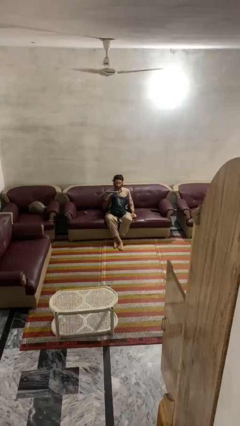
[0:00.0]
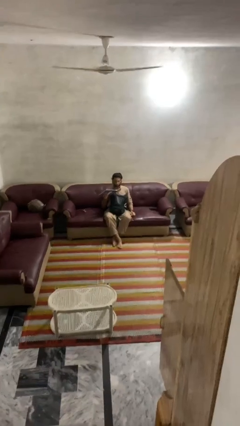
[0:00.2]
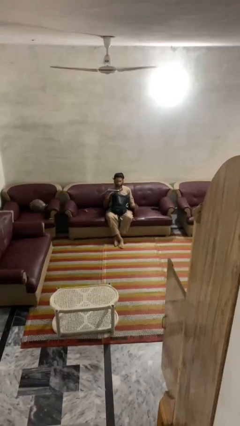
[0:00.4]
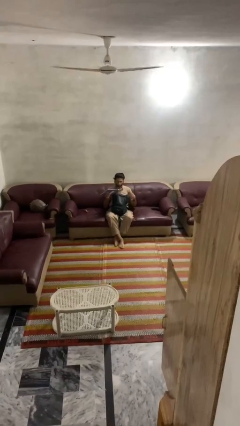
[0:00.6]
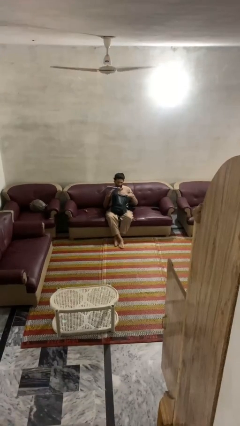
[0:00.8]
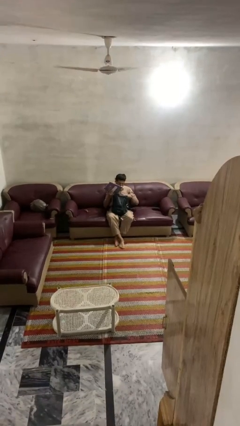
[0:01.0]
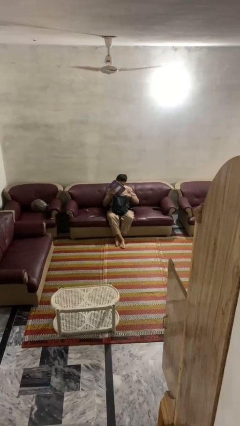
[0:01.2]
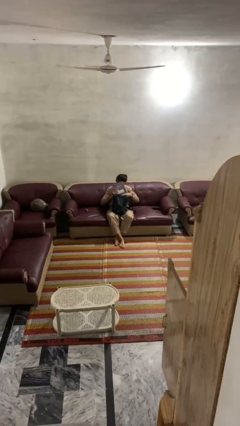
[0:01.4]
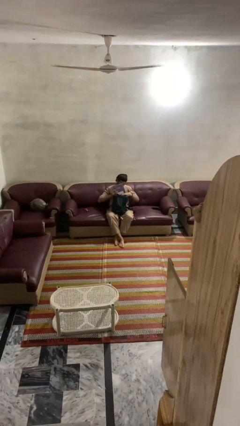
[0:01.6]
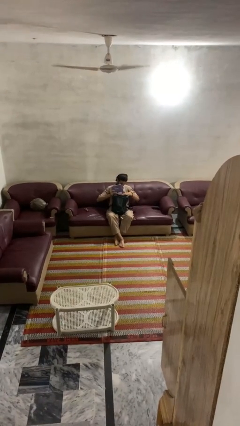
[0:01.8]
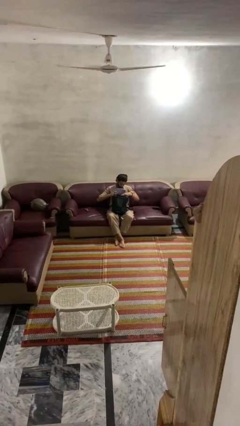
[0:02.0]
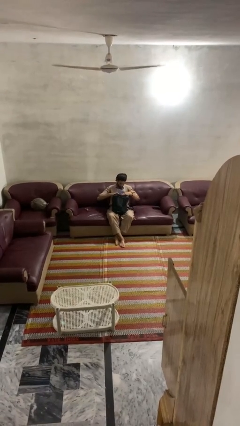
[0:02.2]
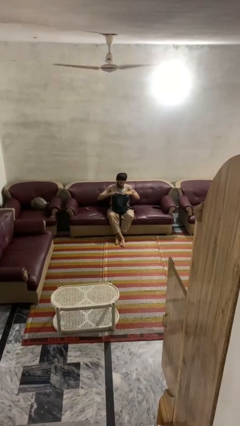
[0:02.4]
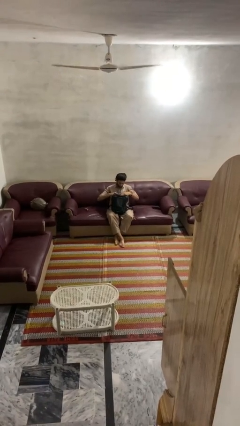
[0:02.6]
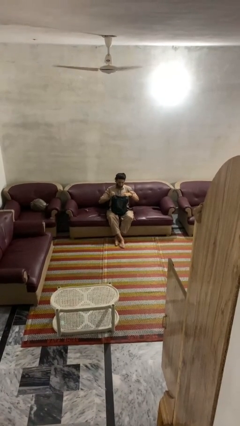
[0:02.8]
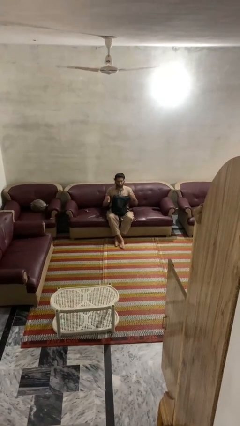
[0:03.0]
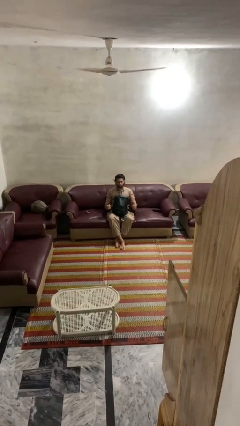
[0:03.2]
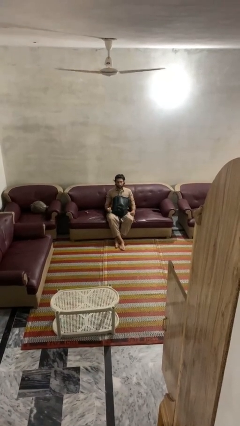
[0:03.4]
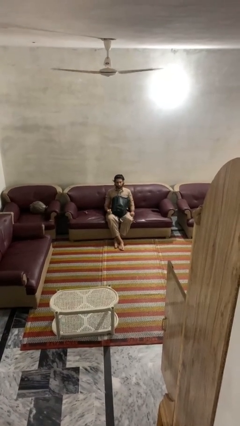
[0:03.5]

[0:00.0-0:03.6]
person puts object into backpack

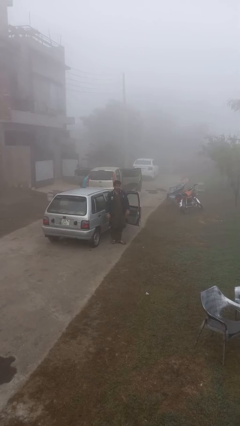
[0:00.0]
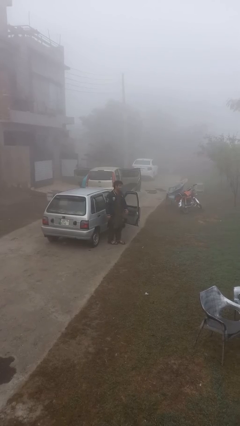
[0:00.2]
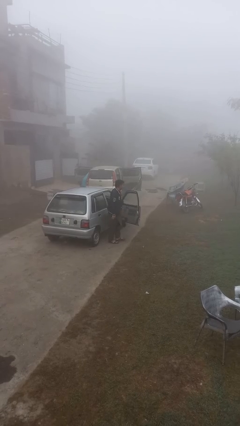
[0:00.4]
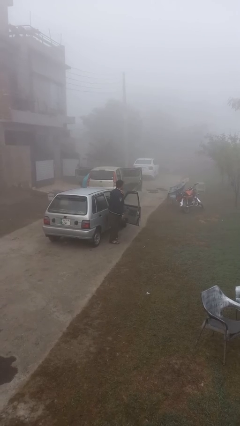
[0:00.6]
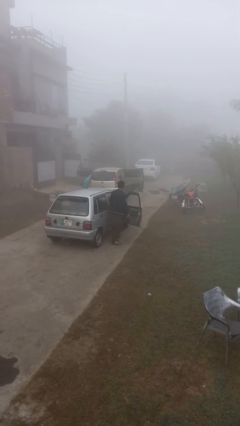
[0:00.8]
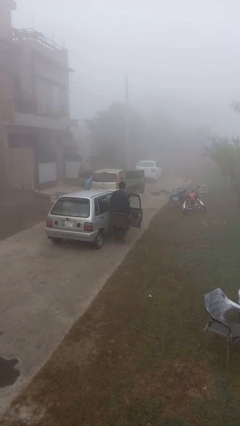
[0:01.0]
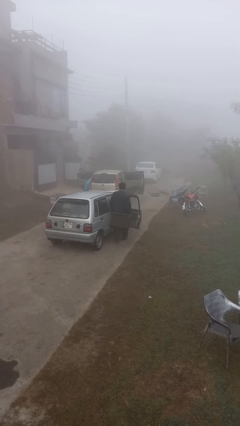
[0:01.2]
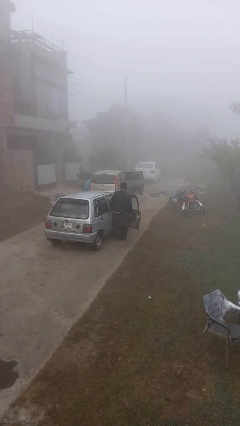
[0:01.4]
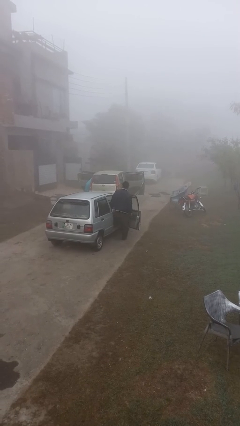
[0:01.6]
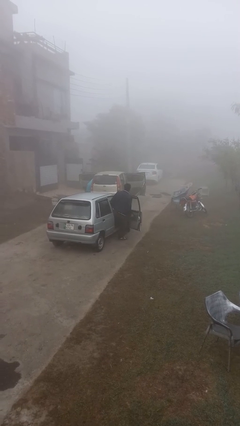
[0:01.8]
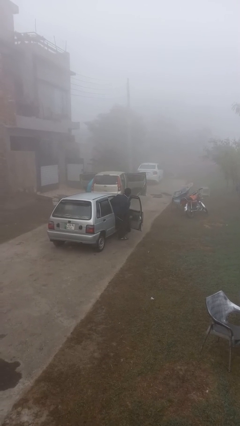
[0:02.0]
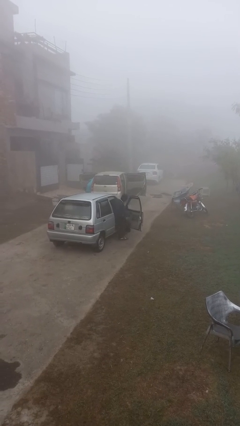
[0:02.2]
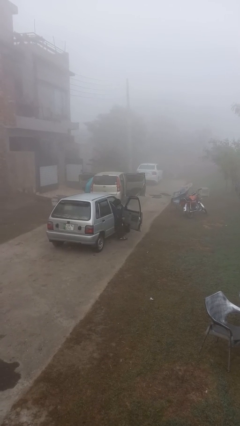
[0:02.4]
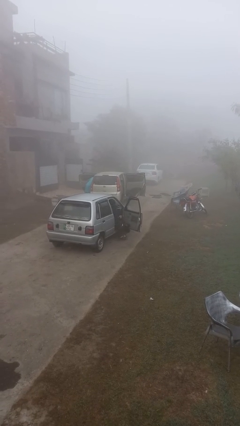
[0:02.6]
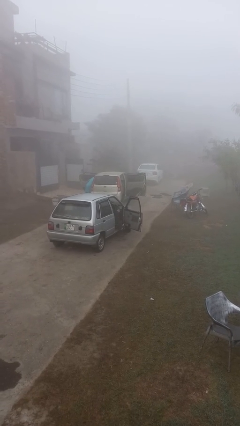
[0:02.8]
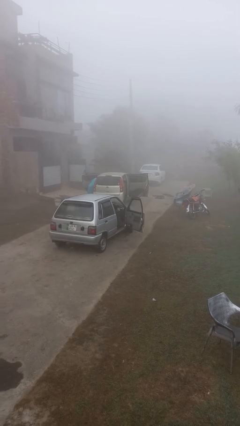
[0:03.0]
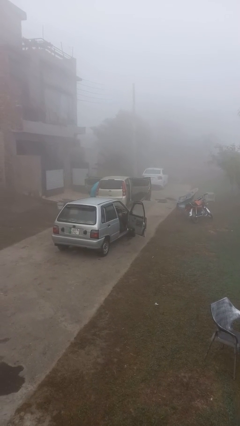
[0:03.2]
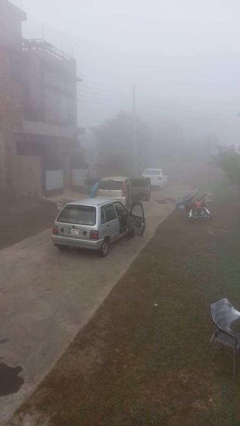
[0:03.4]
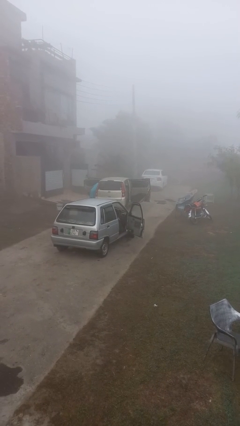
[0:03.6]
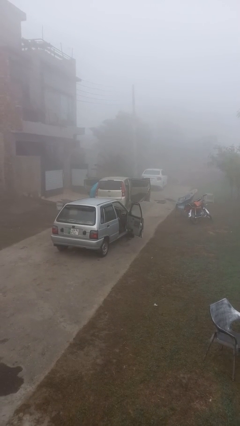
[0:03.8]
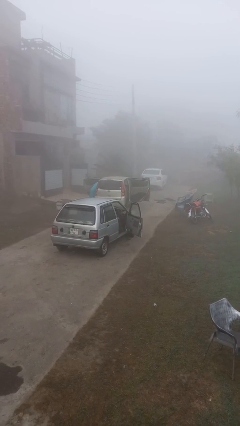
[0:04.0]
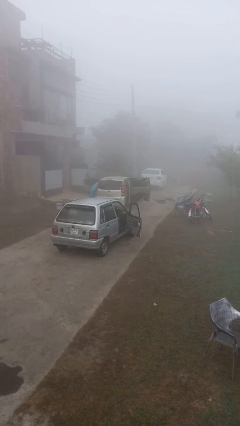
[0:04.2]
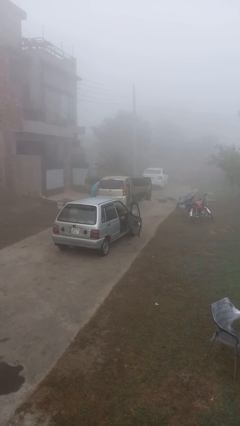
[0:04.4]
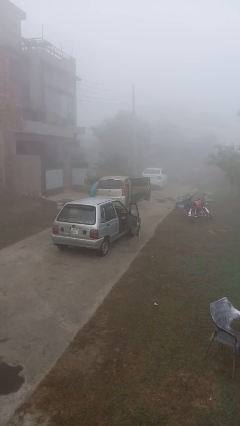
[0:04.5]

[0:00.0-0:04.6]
person enters car

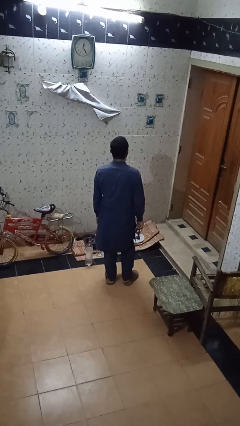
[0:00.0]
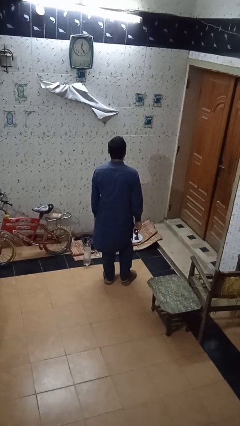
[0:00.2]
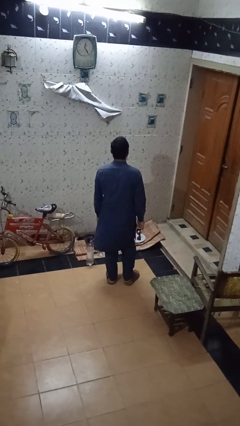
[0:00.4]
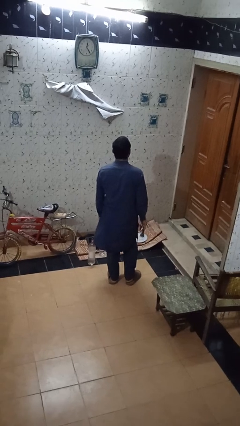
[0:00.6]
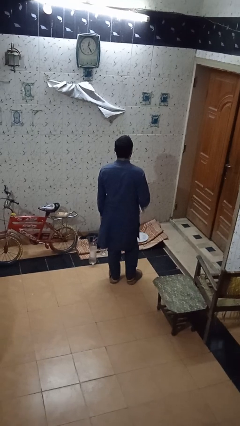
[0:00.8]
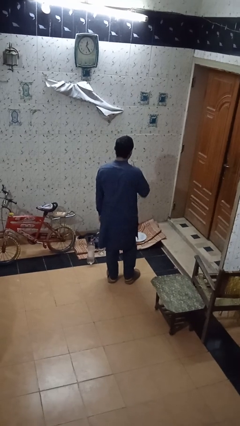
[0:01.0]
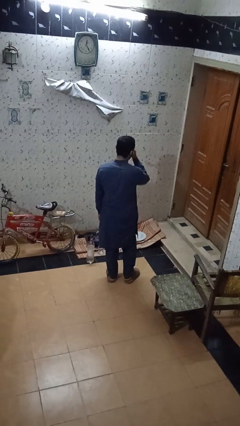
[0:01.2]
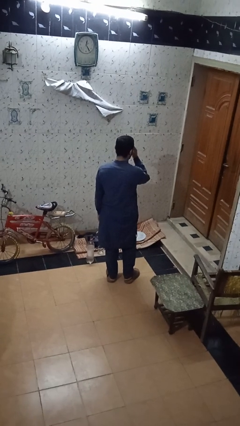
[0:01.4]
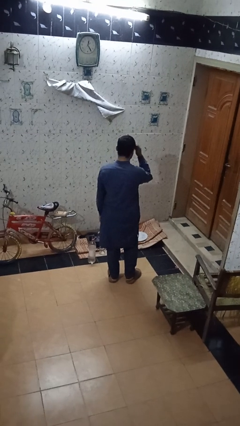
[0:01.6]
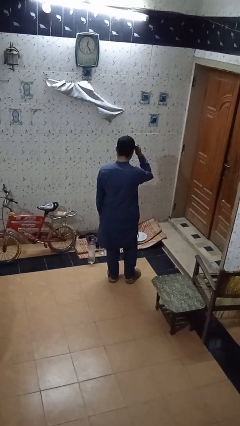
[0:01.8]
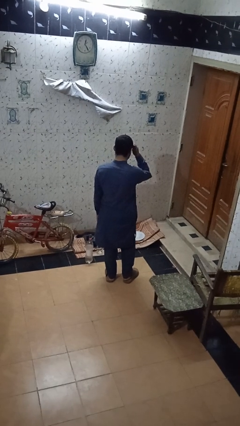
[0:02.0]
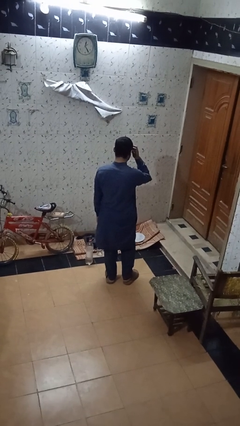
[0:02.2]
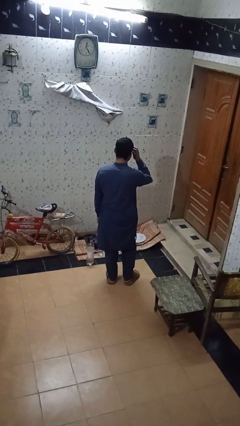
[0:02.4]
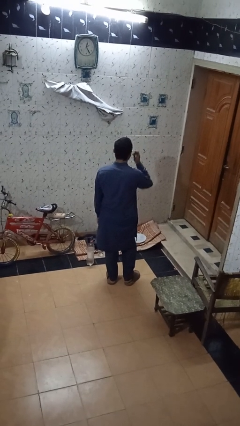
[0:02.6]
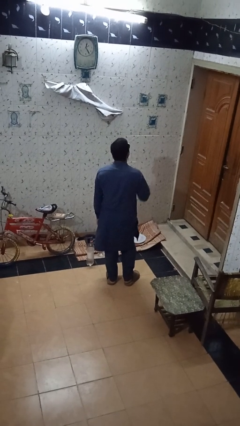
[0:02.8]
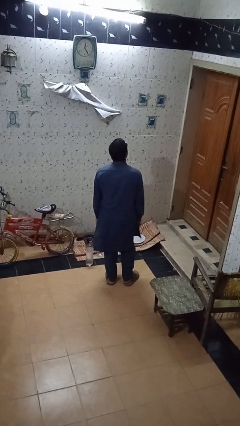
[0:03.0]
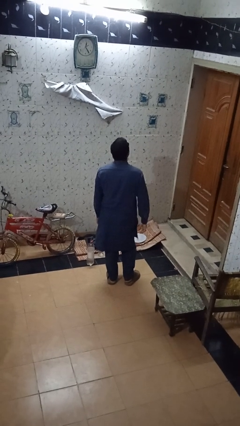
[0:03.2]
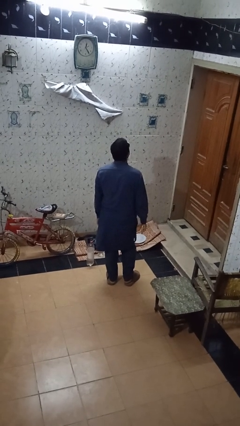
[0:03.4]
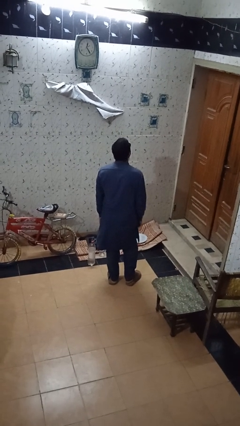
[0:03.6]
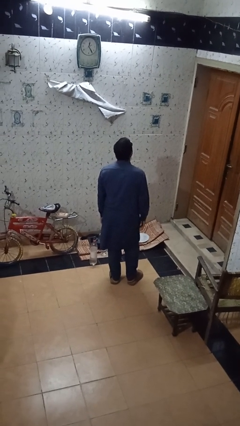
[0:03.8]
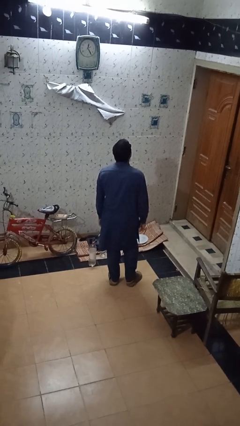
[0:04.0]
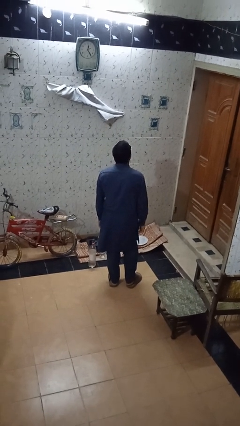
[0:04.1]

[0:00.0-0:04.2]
person puts on sunglasses

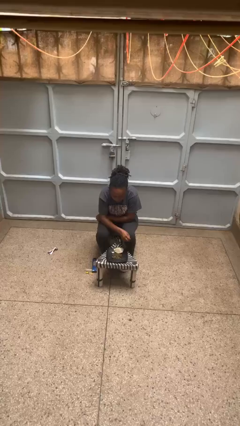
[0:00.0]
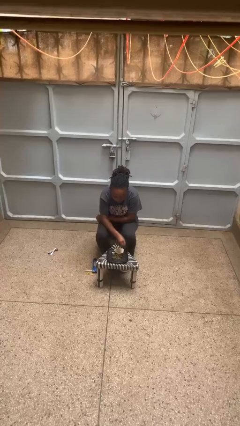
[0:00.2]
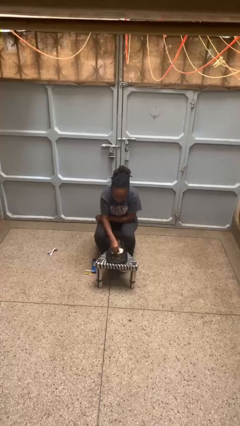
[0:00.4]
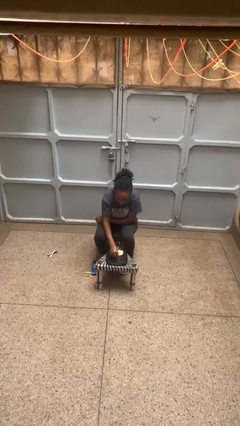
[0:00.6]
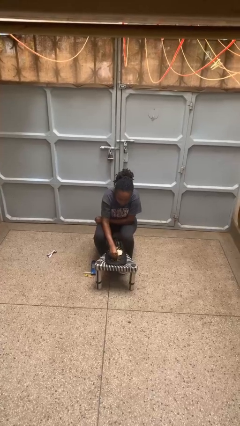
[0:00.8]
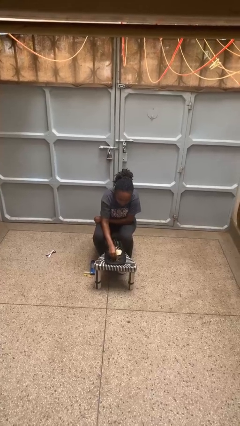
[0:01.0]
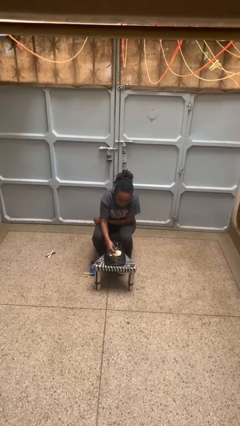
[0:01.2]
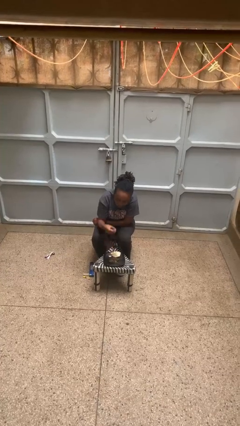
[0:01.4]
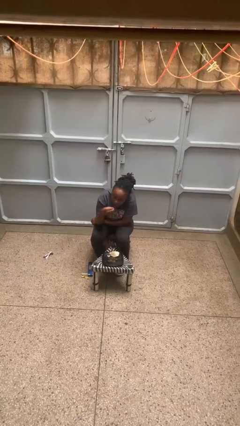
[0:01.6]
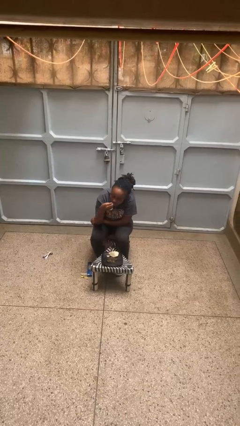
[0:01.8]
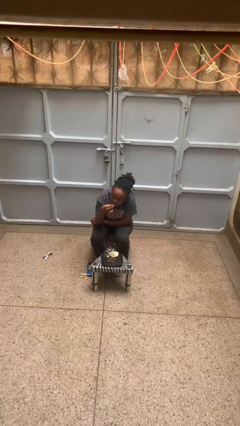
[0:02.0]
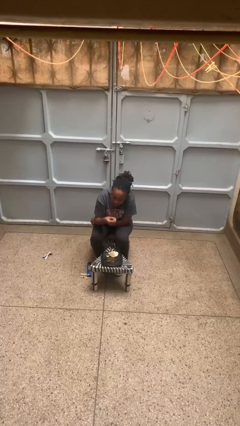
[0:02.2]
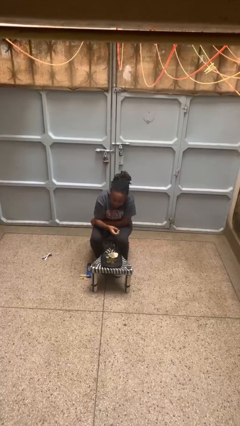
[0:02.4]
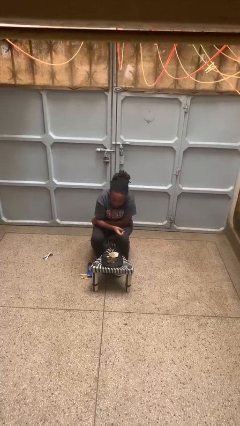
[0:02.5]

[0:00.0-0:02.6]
person eats with hands

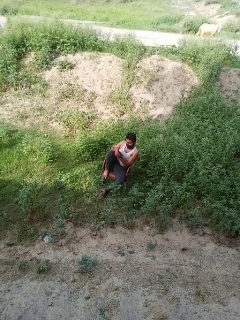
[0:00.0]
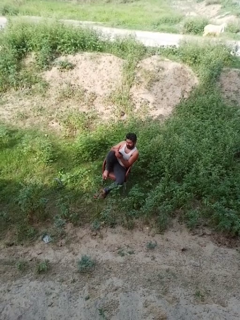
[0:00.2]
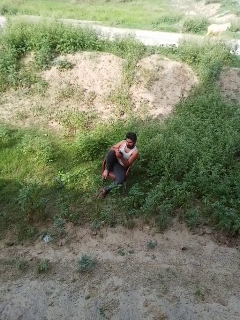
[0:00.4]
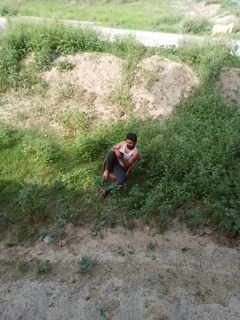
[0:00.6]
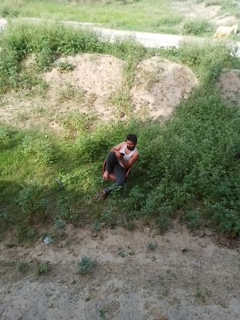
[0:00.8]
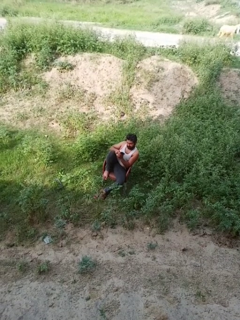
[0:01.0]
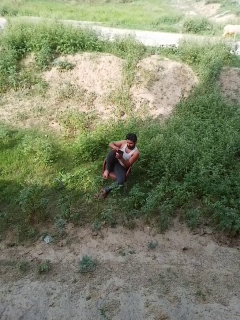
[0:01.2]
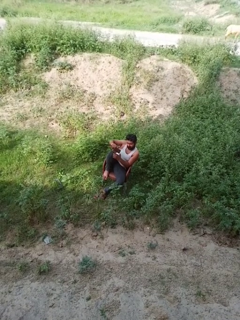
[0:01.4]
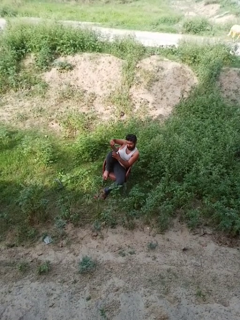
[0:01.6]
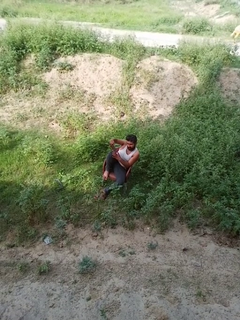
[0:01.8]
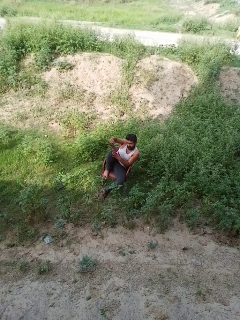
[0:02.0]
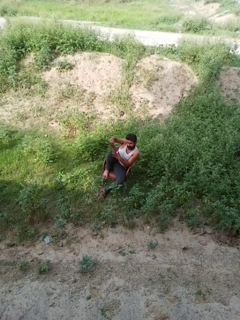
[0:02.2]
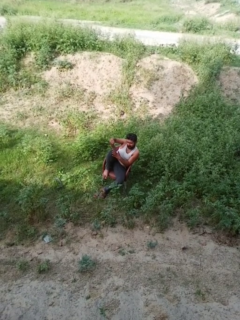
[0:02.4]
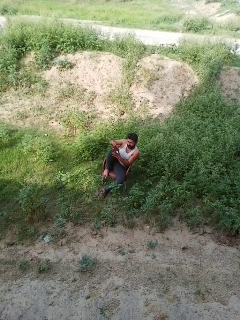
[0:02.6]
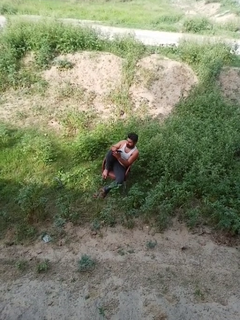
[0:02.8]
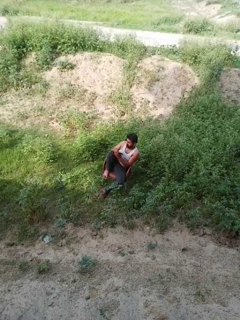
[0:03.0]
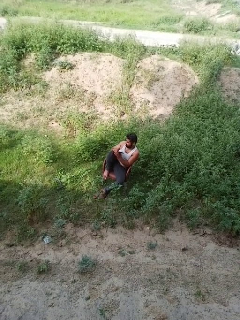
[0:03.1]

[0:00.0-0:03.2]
person takes selfie
